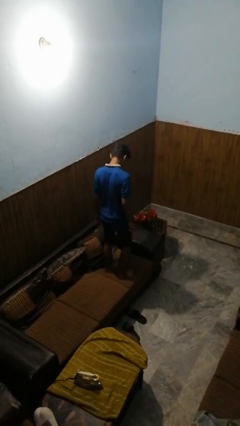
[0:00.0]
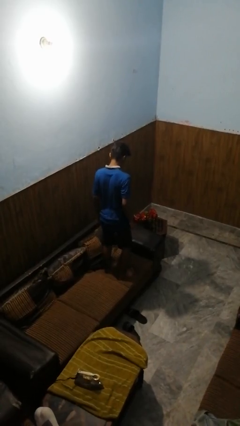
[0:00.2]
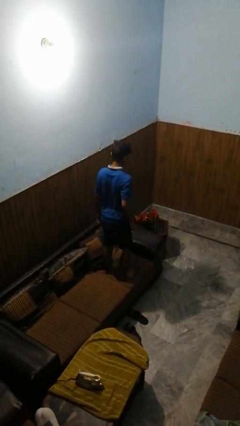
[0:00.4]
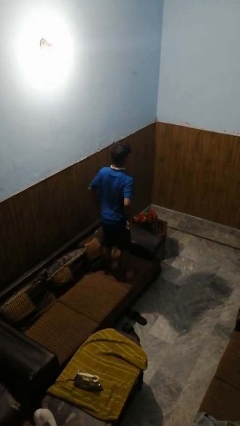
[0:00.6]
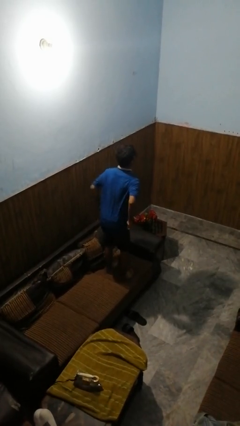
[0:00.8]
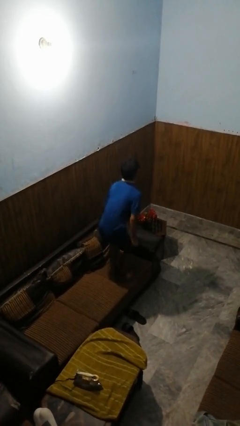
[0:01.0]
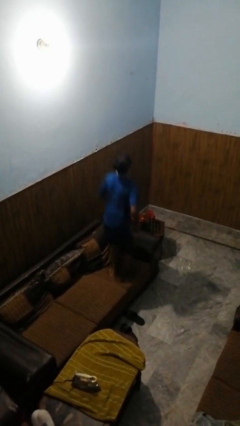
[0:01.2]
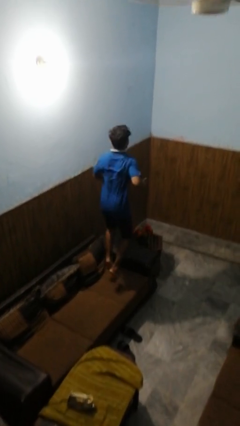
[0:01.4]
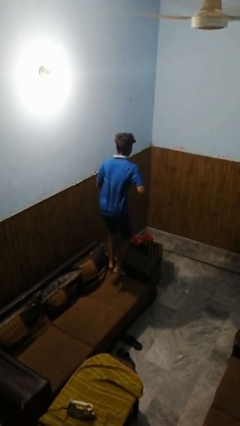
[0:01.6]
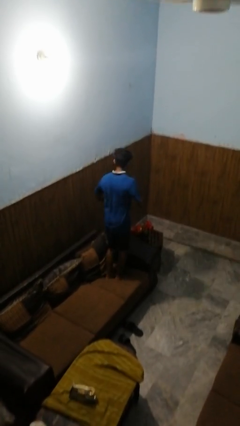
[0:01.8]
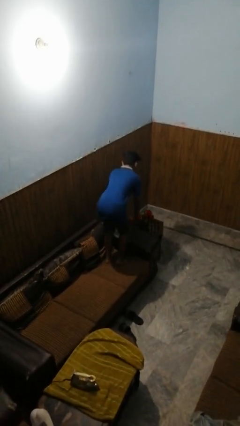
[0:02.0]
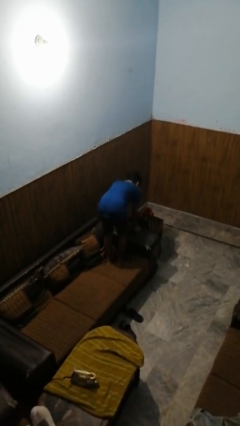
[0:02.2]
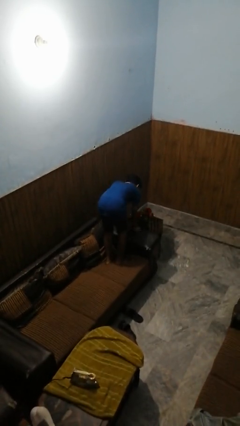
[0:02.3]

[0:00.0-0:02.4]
person jumps on couch

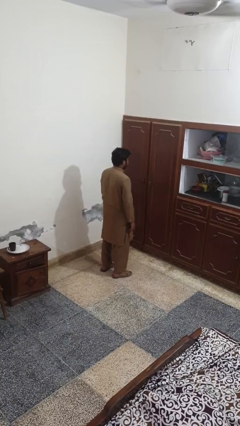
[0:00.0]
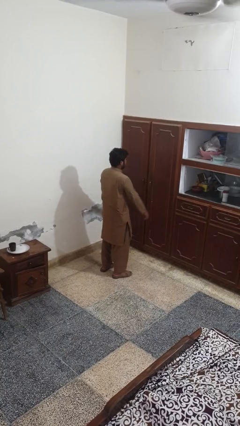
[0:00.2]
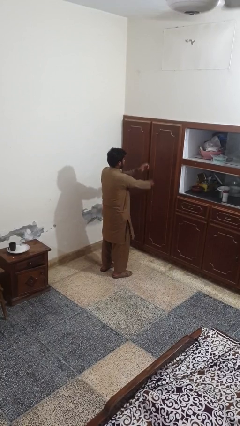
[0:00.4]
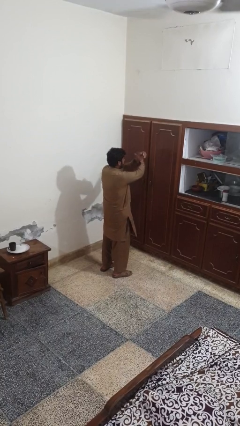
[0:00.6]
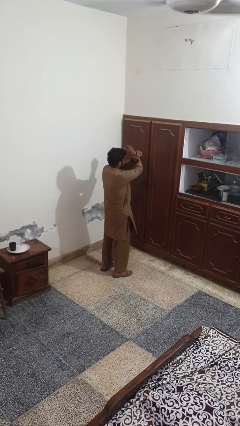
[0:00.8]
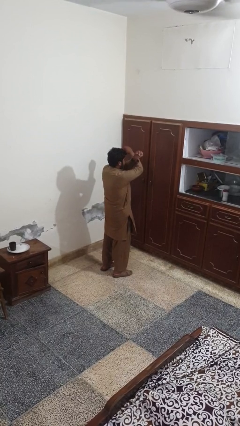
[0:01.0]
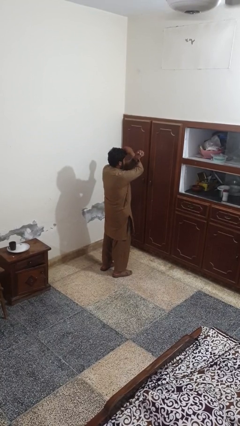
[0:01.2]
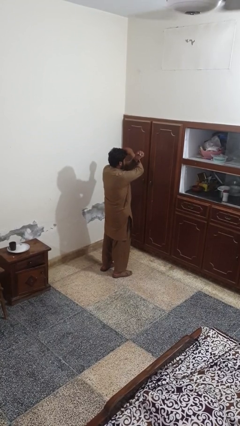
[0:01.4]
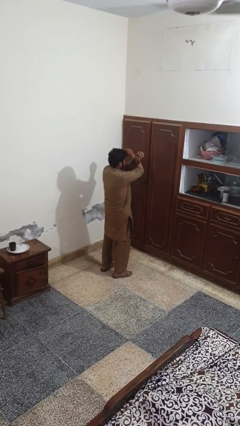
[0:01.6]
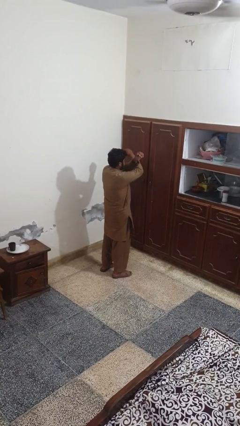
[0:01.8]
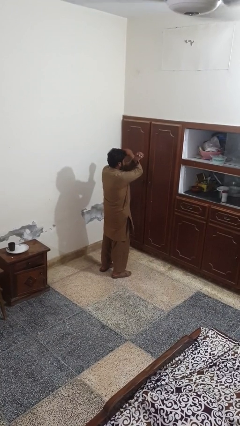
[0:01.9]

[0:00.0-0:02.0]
person gestures arms x

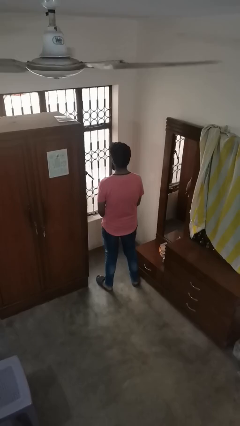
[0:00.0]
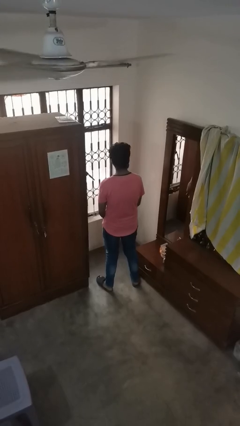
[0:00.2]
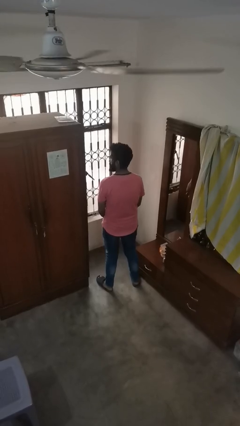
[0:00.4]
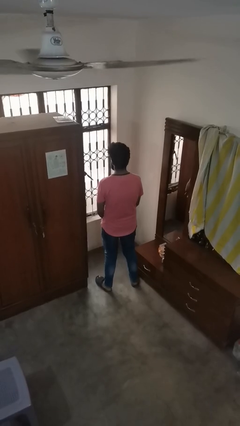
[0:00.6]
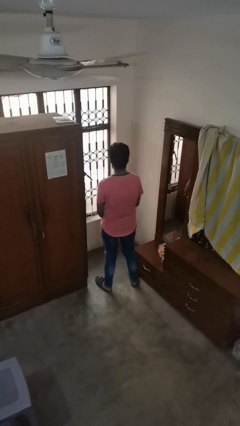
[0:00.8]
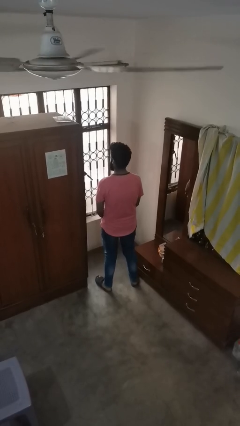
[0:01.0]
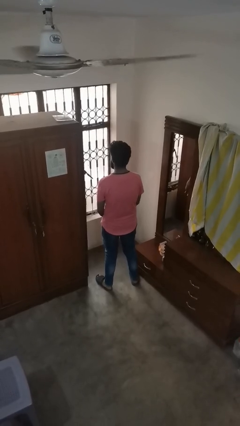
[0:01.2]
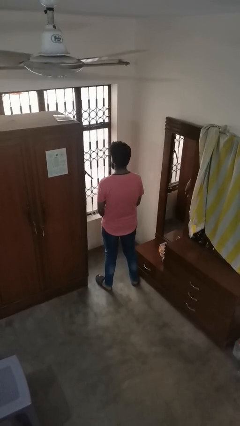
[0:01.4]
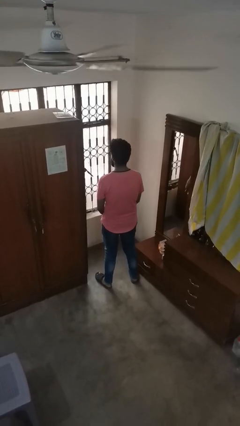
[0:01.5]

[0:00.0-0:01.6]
person shakes head

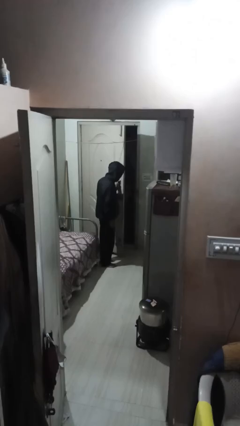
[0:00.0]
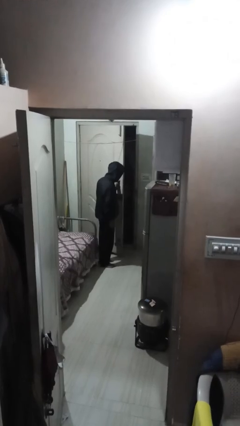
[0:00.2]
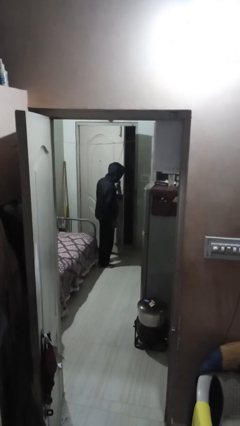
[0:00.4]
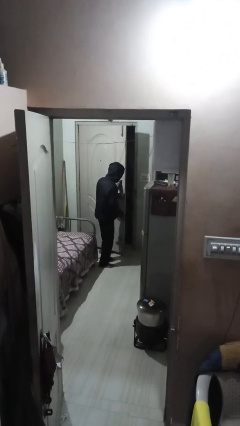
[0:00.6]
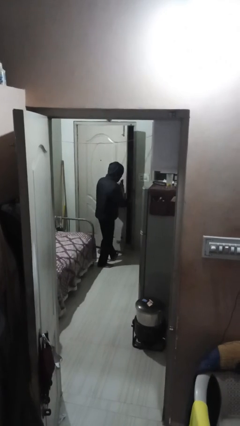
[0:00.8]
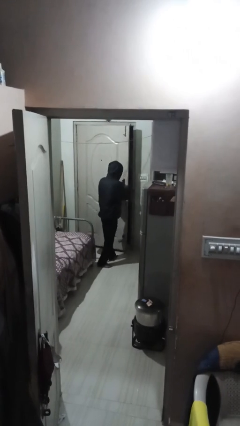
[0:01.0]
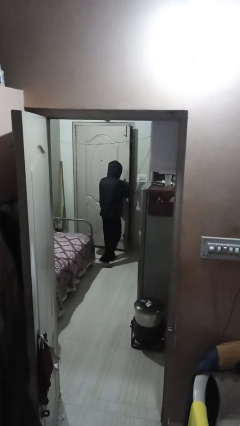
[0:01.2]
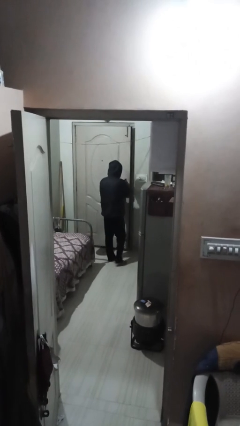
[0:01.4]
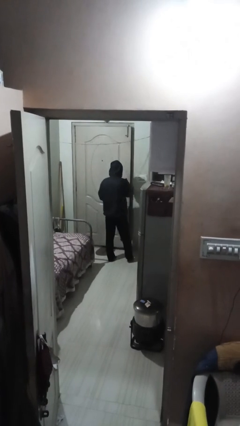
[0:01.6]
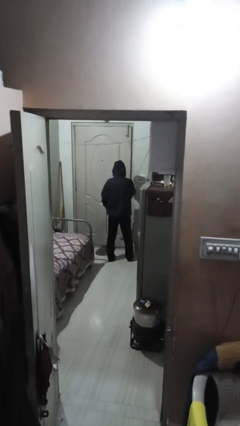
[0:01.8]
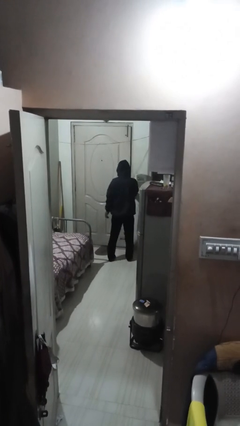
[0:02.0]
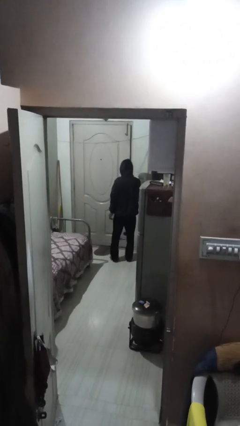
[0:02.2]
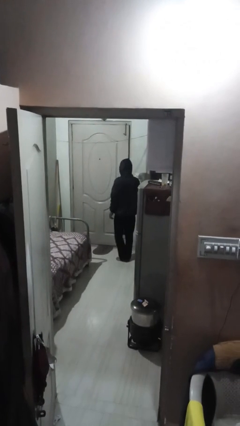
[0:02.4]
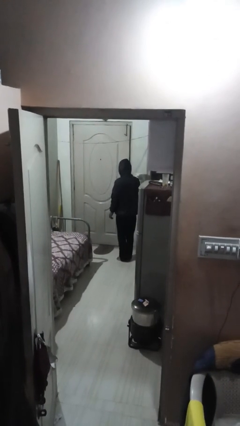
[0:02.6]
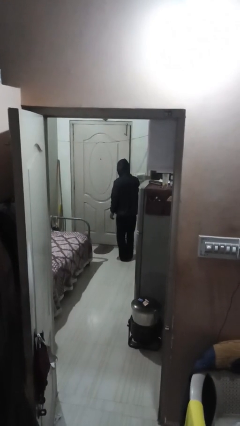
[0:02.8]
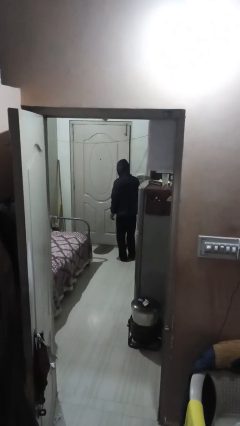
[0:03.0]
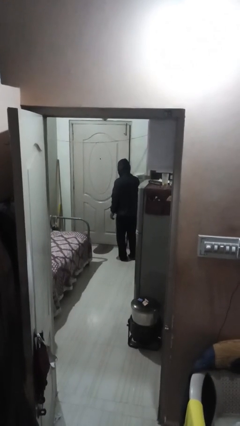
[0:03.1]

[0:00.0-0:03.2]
person closes facility door

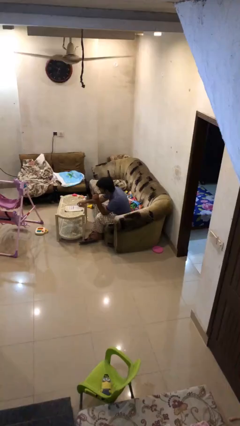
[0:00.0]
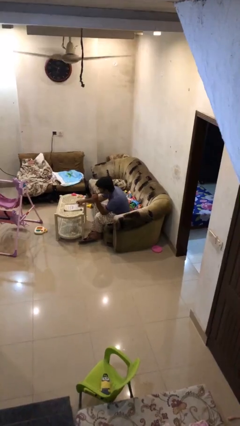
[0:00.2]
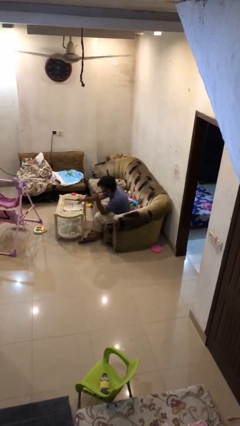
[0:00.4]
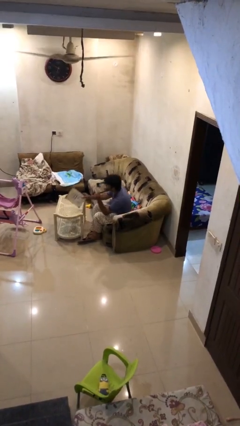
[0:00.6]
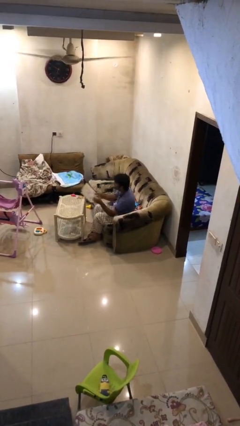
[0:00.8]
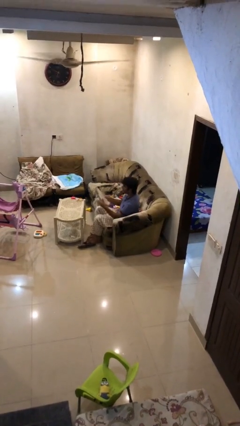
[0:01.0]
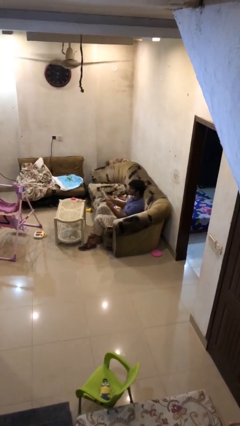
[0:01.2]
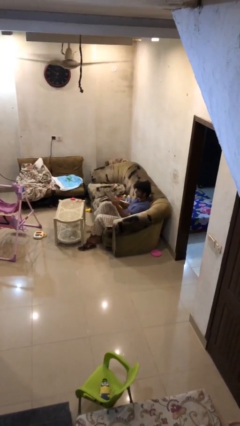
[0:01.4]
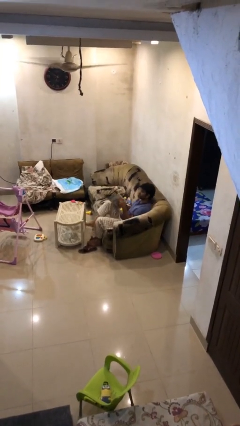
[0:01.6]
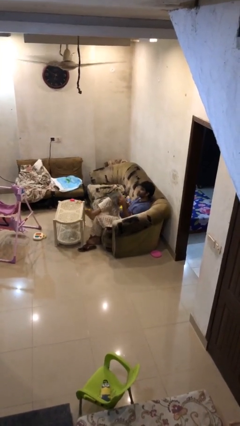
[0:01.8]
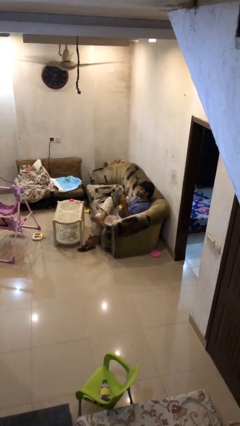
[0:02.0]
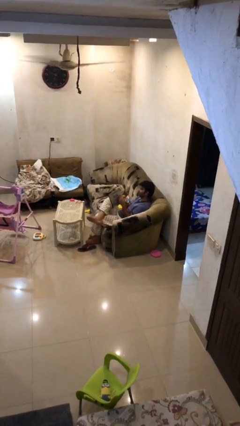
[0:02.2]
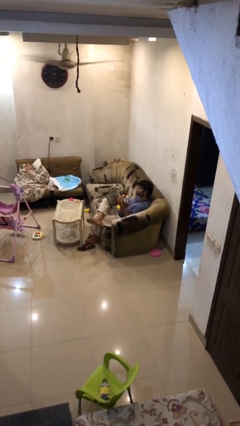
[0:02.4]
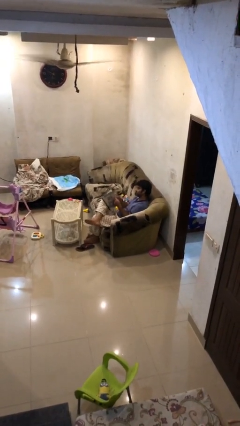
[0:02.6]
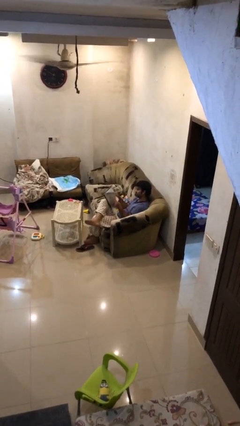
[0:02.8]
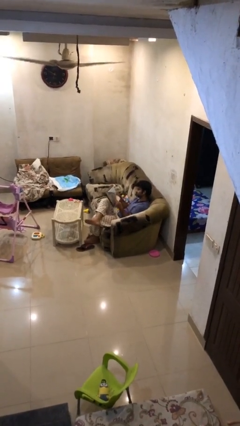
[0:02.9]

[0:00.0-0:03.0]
person picks up object from table

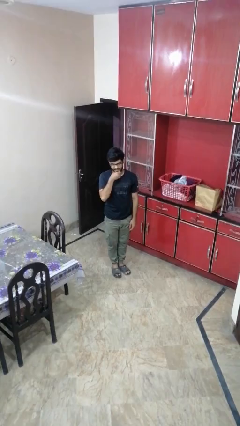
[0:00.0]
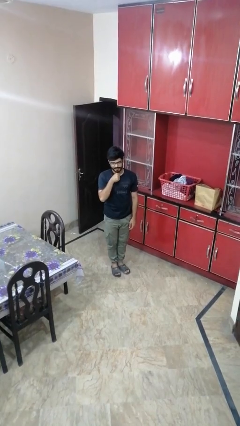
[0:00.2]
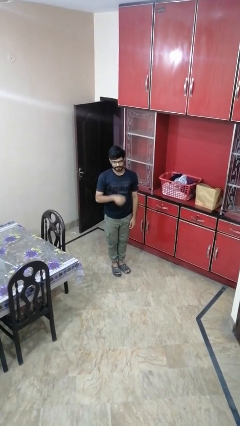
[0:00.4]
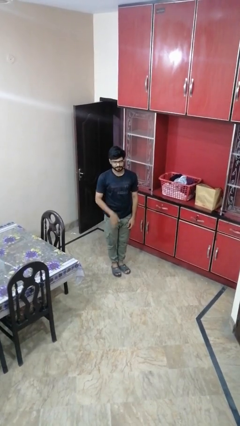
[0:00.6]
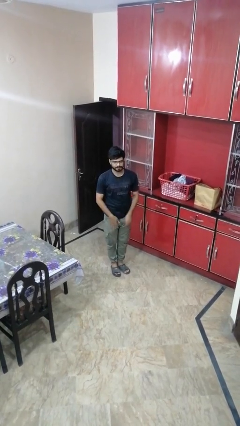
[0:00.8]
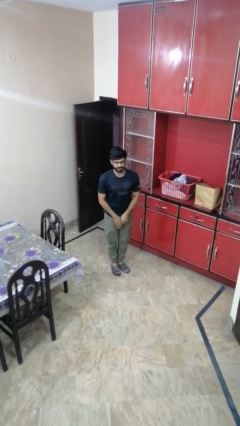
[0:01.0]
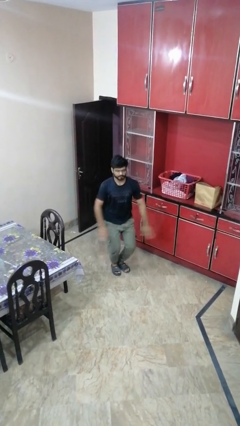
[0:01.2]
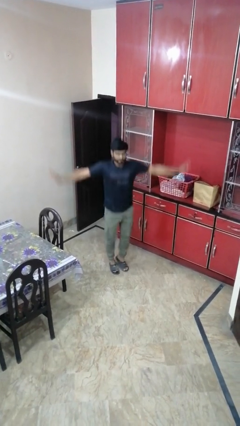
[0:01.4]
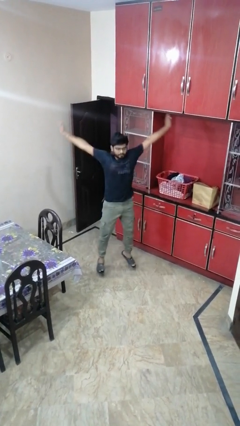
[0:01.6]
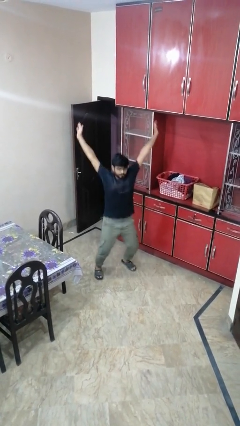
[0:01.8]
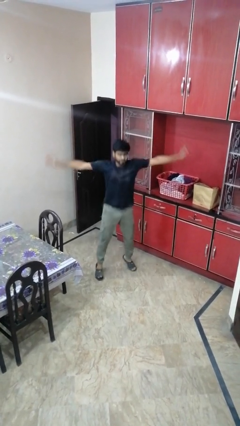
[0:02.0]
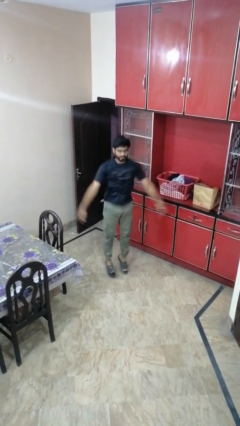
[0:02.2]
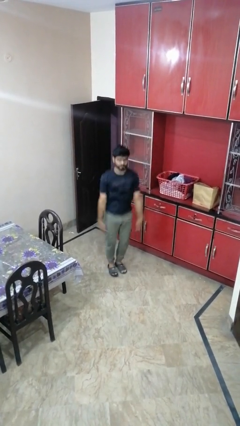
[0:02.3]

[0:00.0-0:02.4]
person exercises with jumping jacks

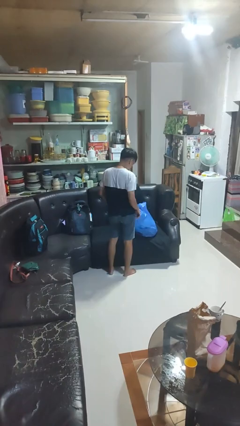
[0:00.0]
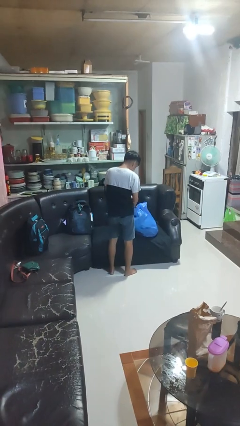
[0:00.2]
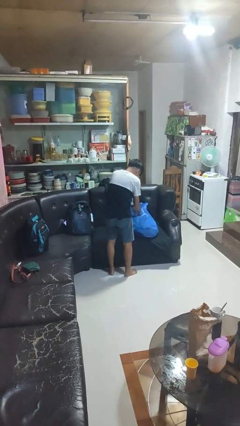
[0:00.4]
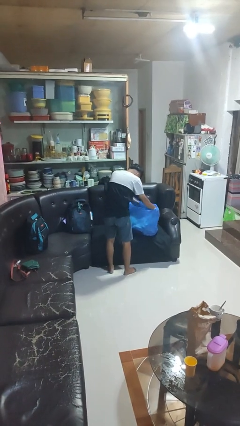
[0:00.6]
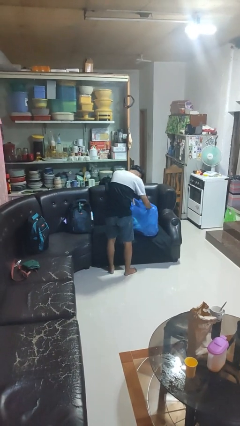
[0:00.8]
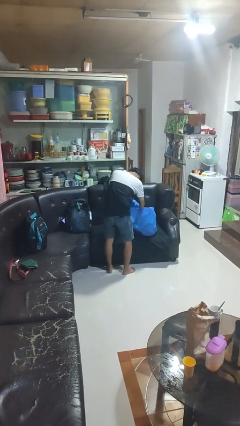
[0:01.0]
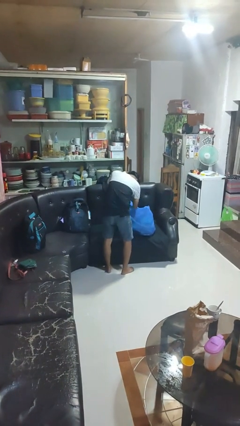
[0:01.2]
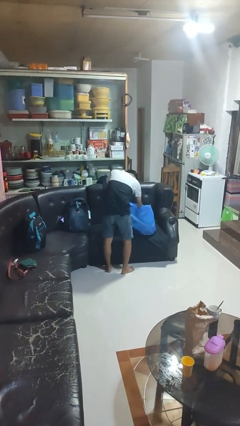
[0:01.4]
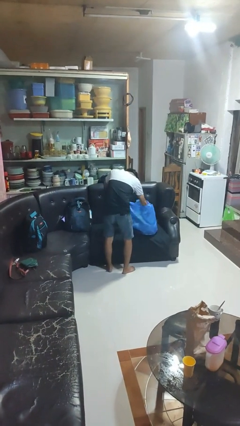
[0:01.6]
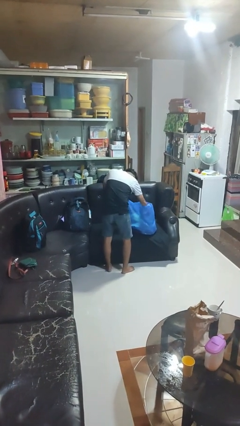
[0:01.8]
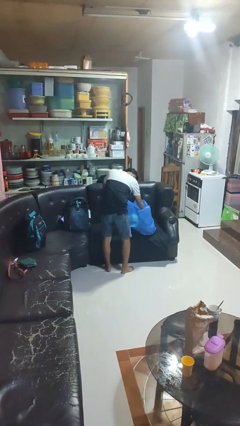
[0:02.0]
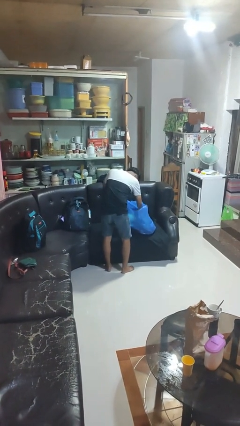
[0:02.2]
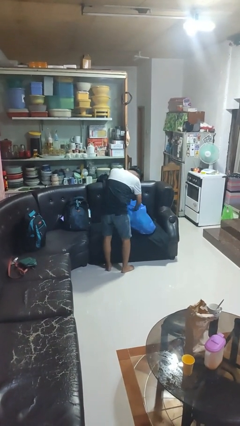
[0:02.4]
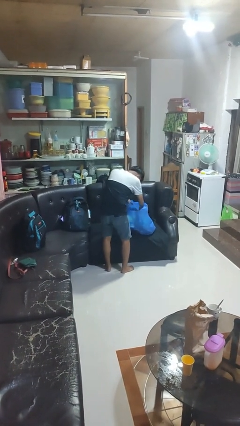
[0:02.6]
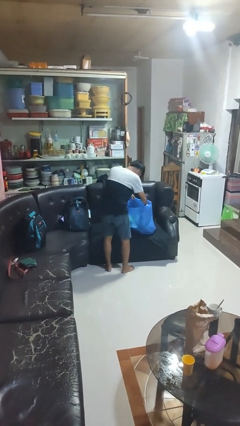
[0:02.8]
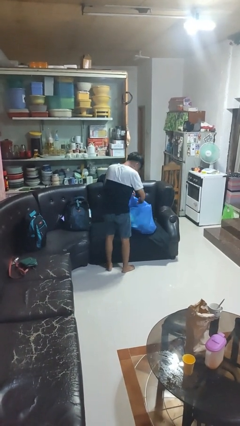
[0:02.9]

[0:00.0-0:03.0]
person searches in bag
